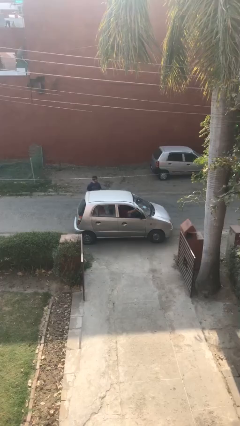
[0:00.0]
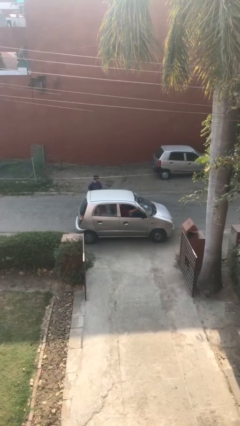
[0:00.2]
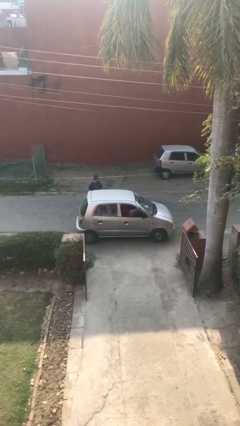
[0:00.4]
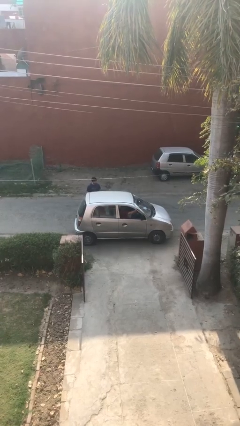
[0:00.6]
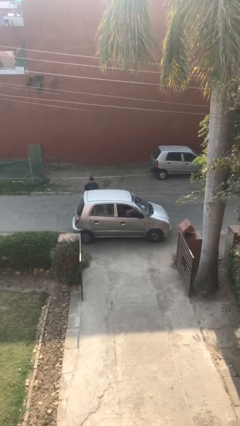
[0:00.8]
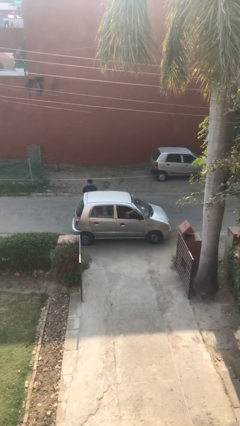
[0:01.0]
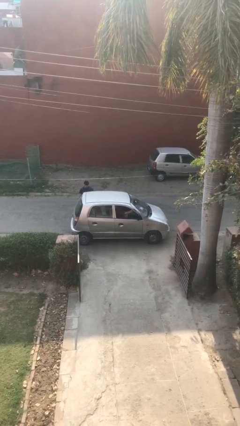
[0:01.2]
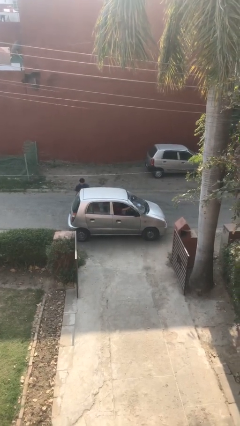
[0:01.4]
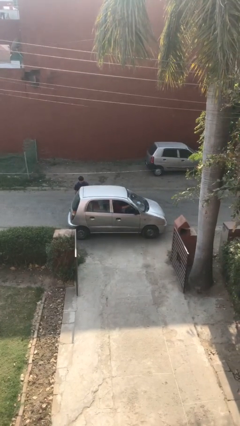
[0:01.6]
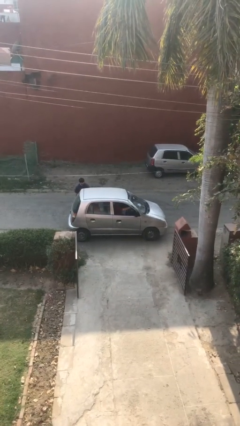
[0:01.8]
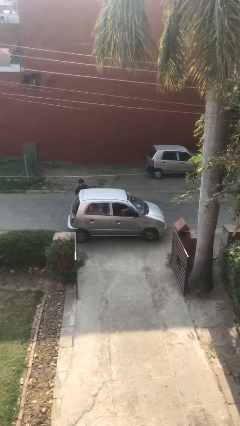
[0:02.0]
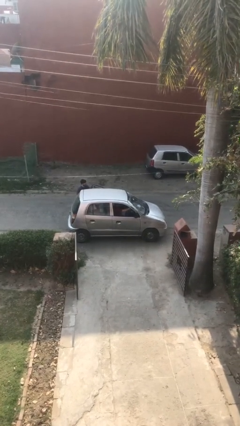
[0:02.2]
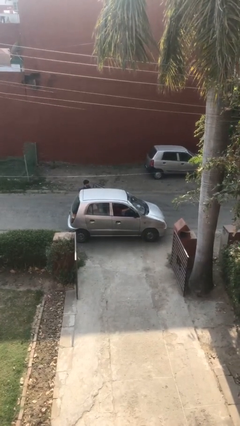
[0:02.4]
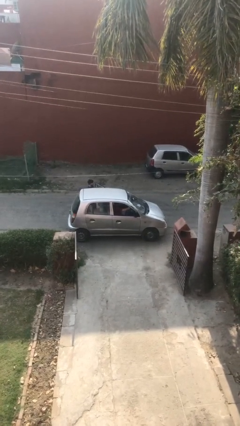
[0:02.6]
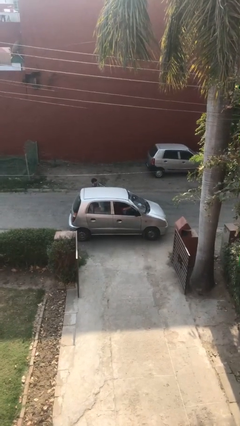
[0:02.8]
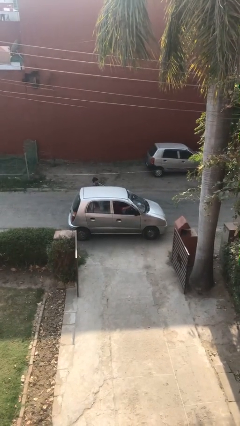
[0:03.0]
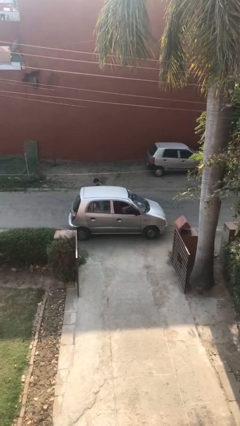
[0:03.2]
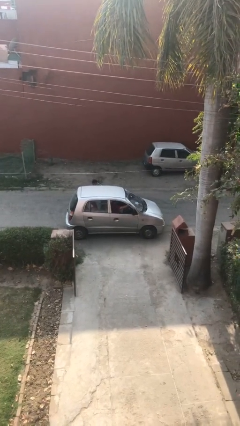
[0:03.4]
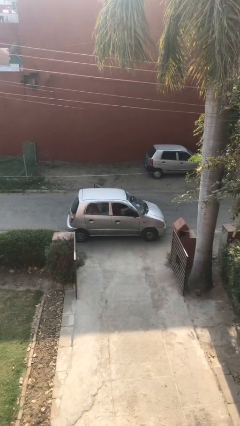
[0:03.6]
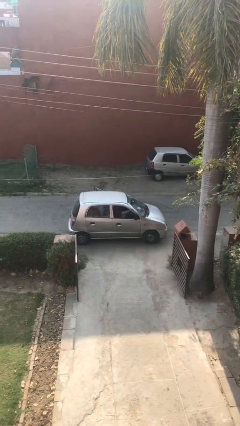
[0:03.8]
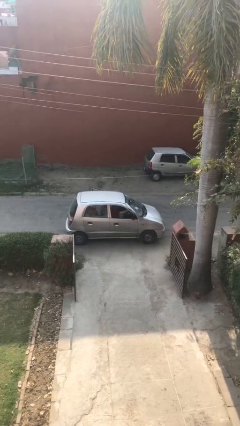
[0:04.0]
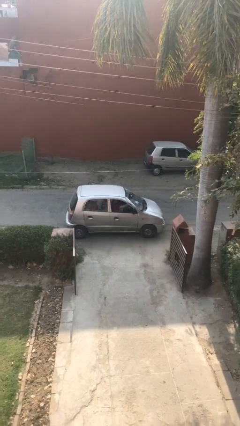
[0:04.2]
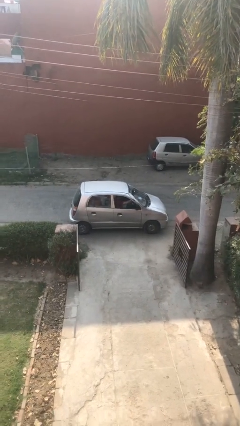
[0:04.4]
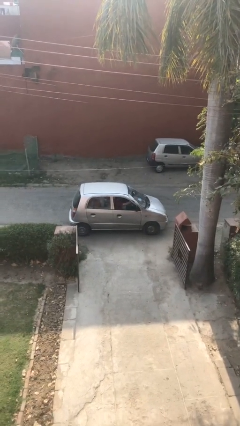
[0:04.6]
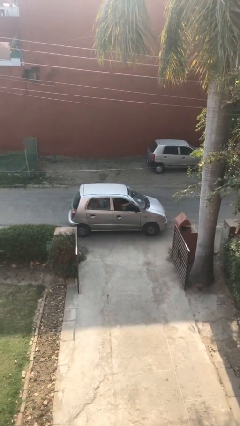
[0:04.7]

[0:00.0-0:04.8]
car picks up person

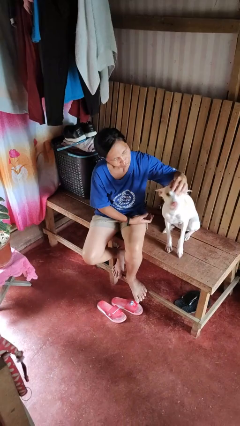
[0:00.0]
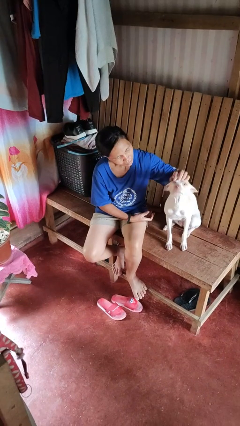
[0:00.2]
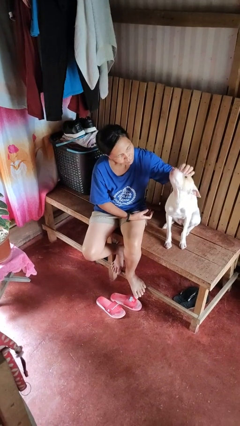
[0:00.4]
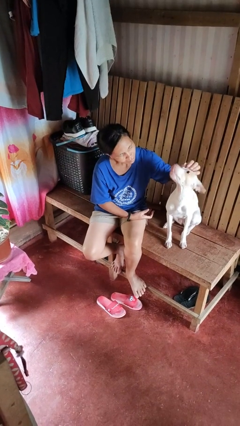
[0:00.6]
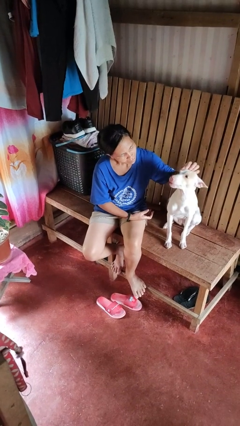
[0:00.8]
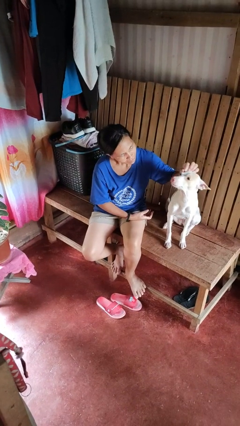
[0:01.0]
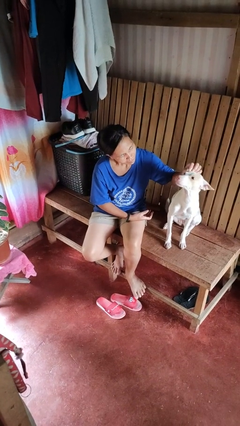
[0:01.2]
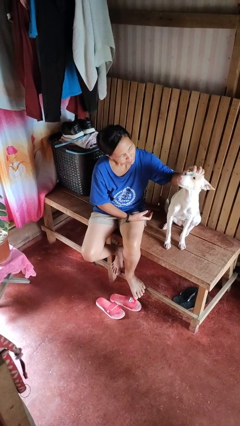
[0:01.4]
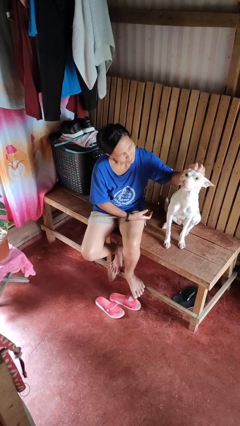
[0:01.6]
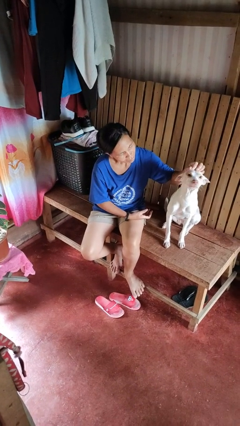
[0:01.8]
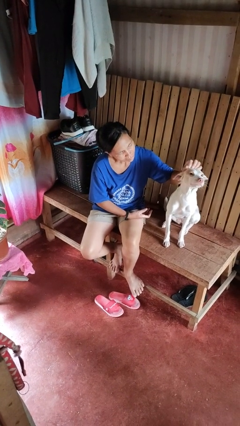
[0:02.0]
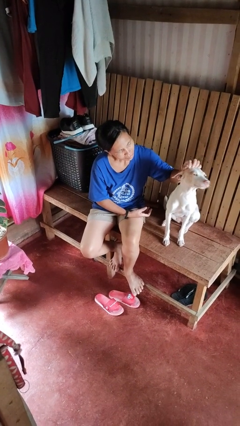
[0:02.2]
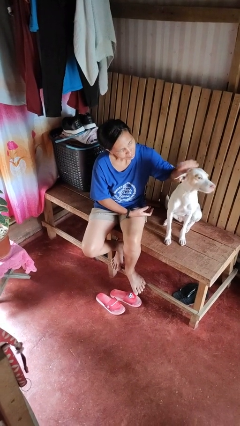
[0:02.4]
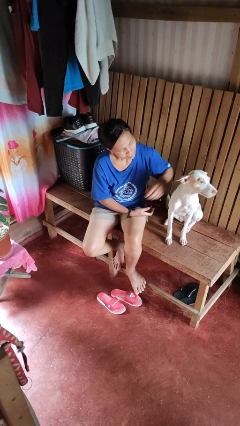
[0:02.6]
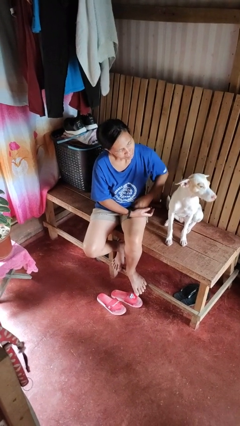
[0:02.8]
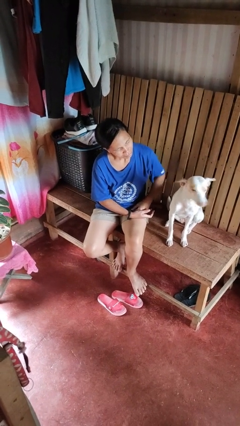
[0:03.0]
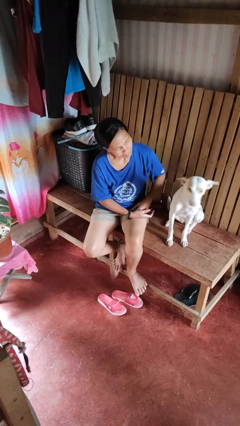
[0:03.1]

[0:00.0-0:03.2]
person pets dog

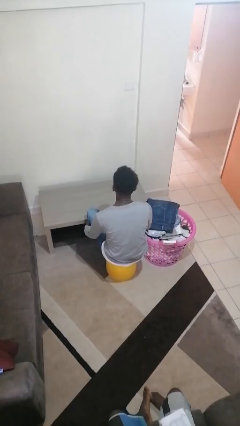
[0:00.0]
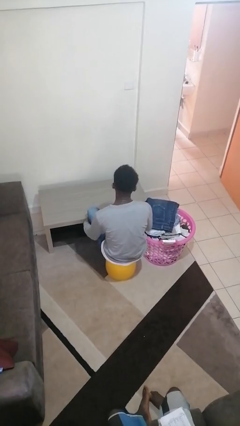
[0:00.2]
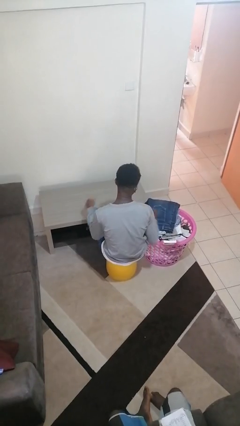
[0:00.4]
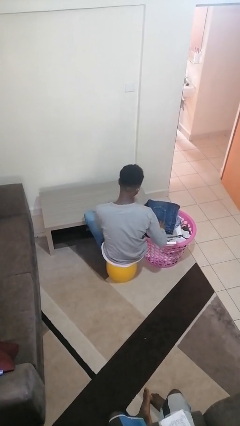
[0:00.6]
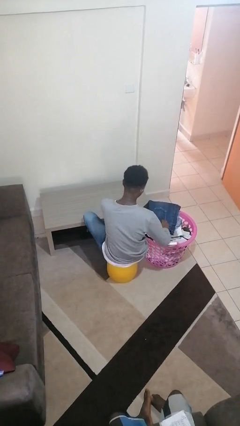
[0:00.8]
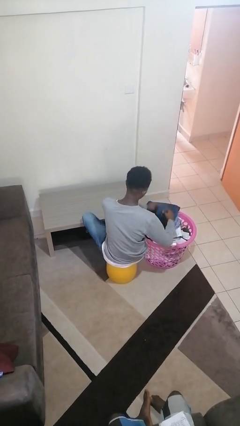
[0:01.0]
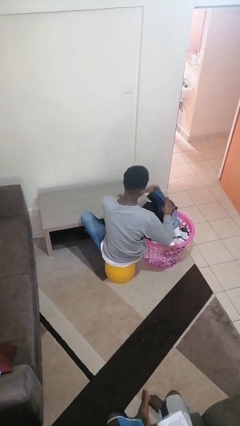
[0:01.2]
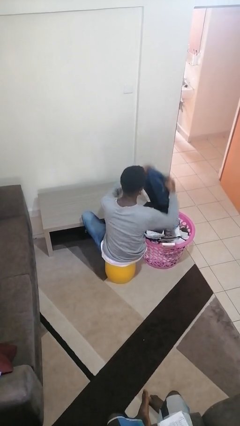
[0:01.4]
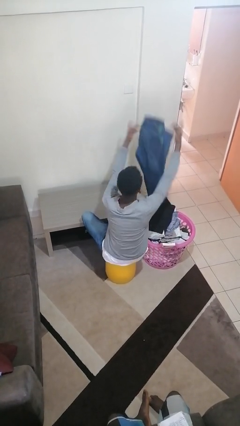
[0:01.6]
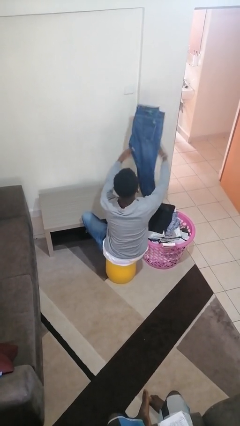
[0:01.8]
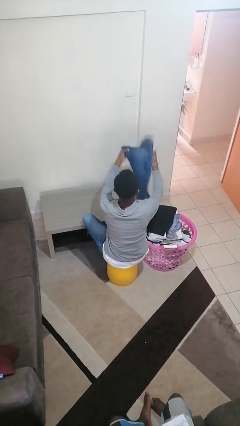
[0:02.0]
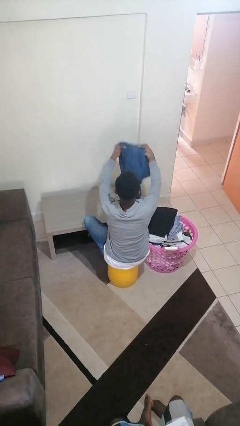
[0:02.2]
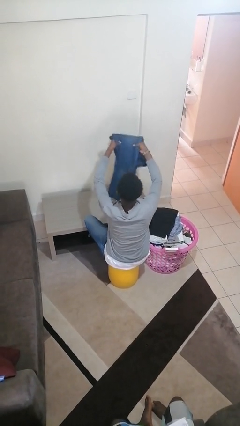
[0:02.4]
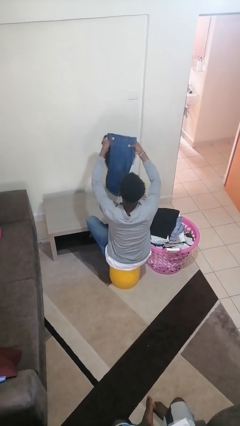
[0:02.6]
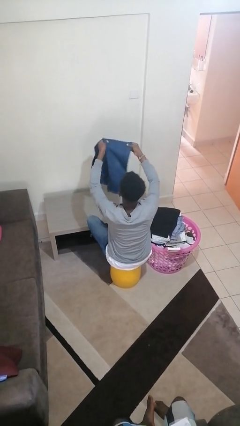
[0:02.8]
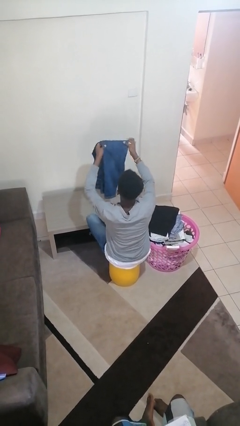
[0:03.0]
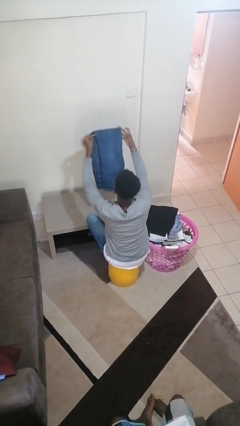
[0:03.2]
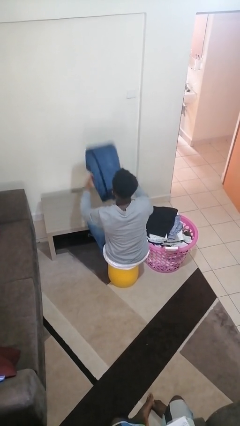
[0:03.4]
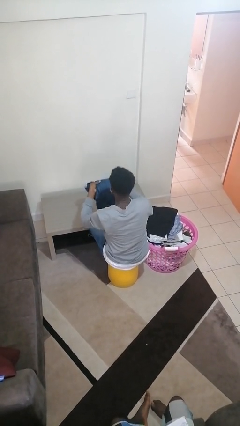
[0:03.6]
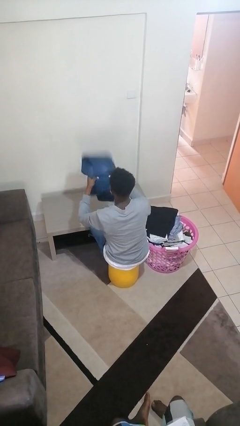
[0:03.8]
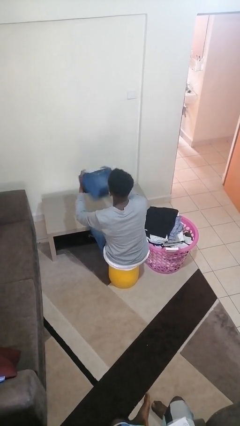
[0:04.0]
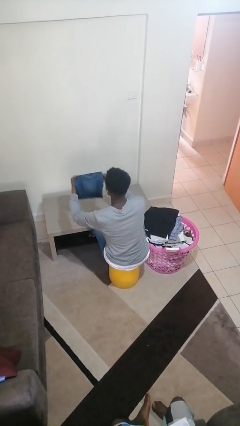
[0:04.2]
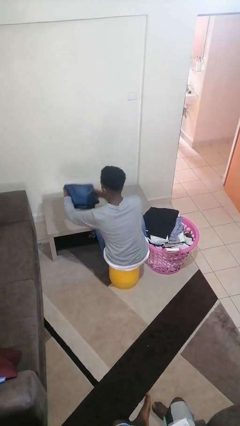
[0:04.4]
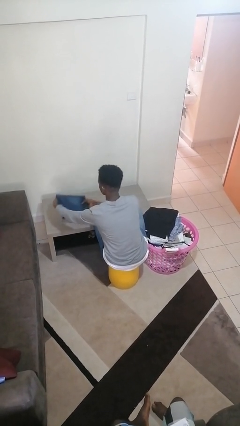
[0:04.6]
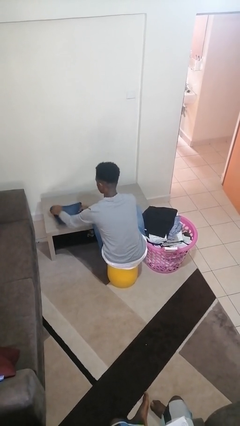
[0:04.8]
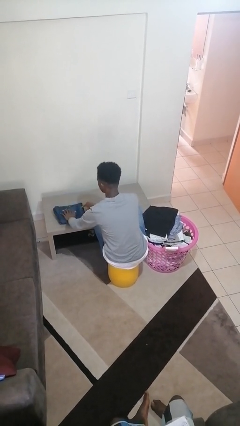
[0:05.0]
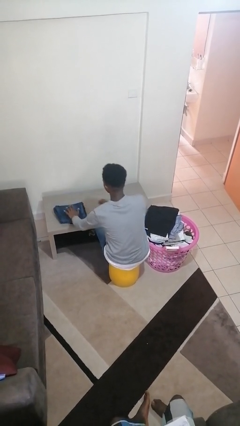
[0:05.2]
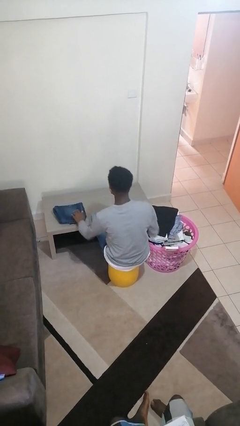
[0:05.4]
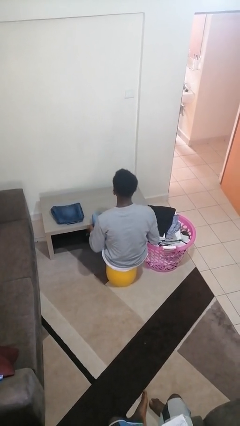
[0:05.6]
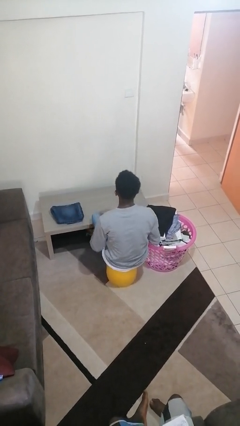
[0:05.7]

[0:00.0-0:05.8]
person folds pants

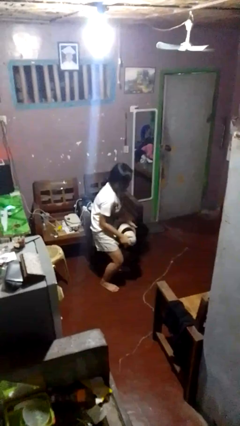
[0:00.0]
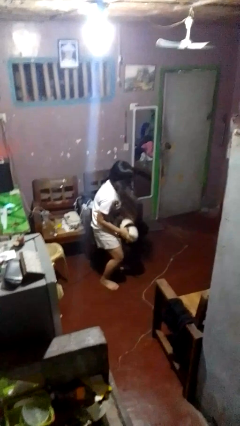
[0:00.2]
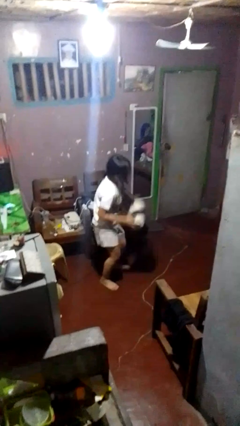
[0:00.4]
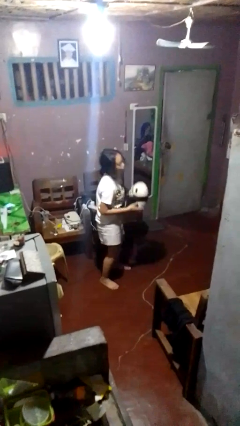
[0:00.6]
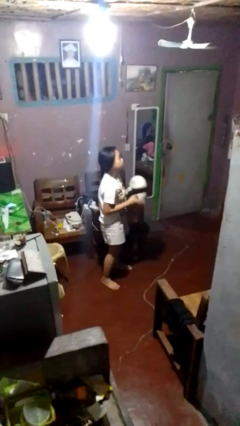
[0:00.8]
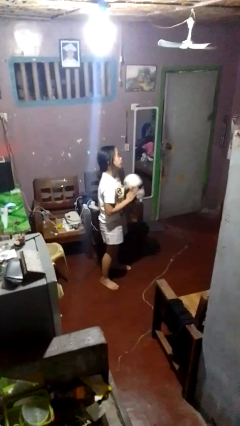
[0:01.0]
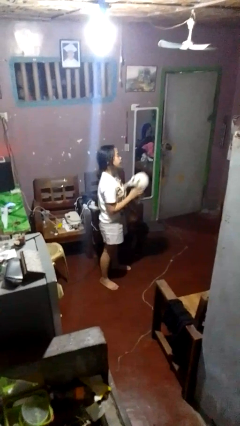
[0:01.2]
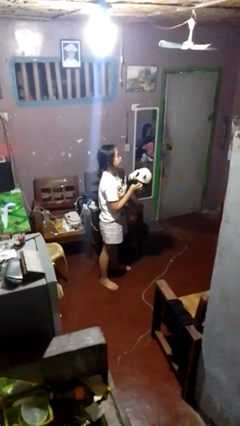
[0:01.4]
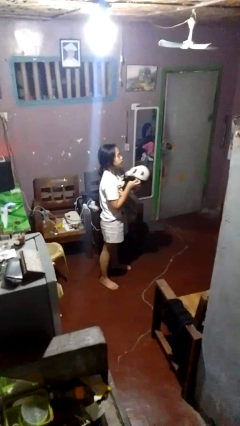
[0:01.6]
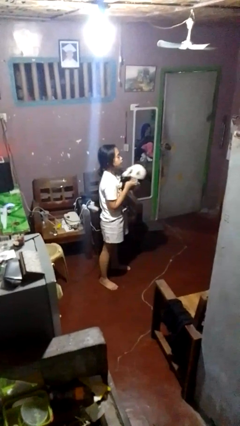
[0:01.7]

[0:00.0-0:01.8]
person catches dropped object

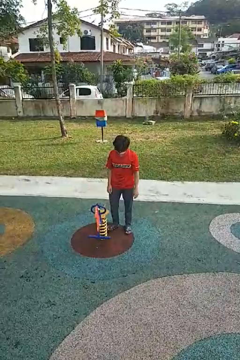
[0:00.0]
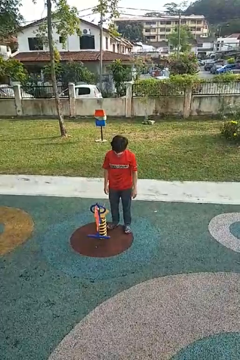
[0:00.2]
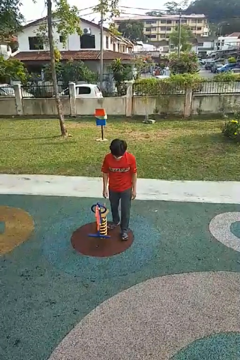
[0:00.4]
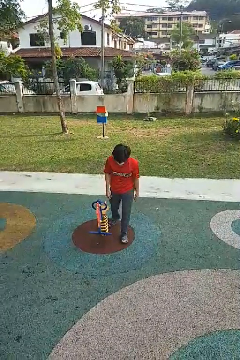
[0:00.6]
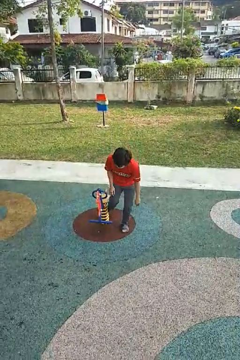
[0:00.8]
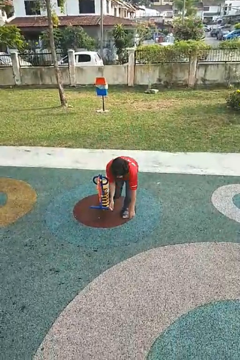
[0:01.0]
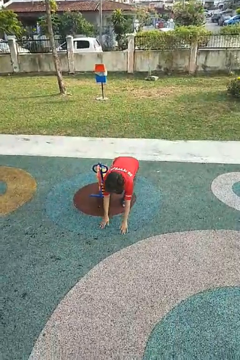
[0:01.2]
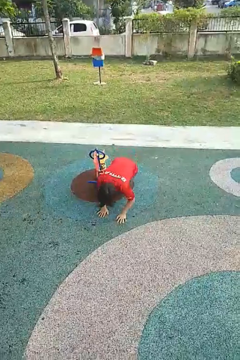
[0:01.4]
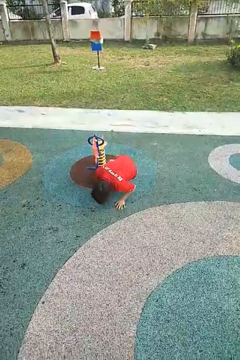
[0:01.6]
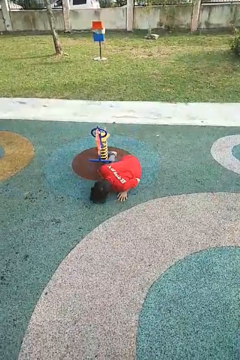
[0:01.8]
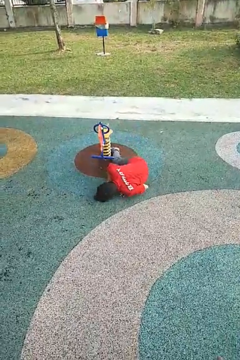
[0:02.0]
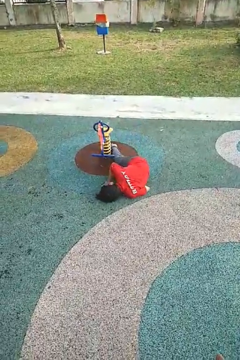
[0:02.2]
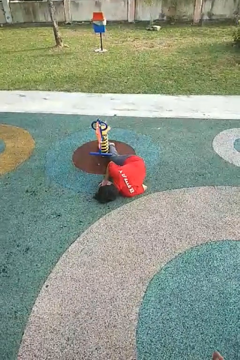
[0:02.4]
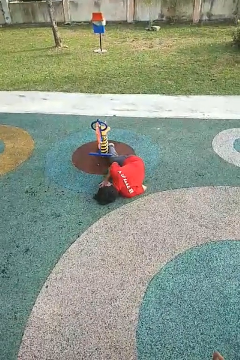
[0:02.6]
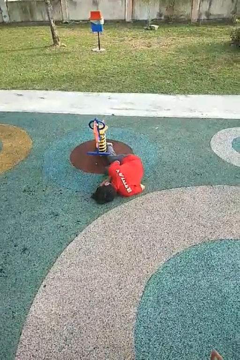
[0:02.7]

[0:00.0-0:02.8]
person trips on object on floor
